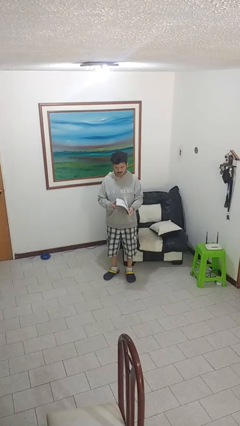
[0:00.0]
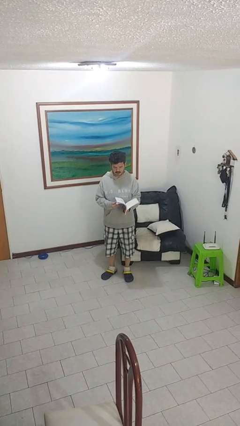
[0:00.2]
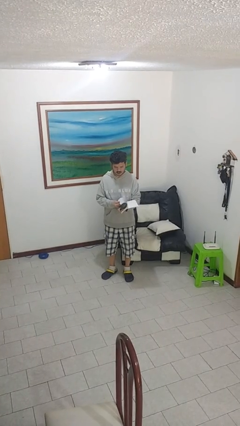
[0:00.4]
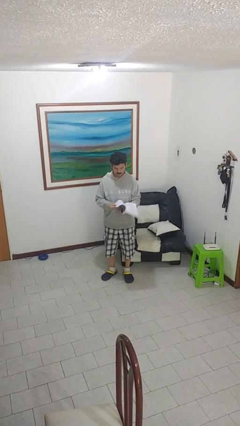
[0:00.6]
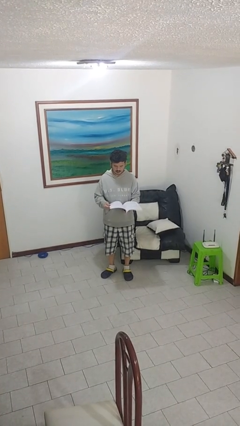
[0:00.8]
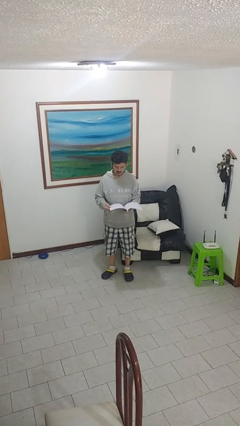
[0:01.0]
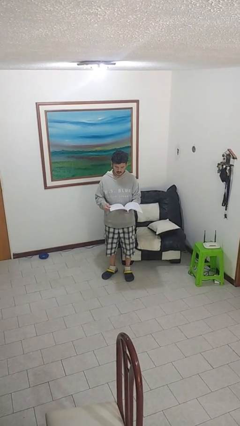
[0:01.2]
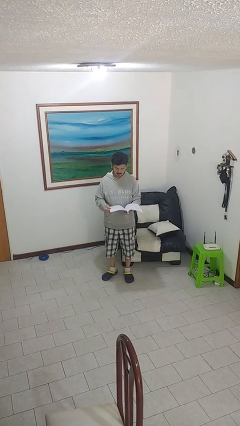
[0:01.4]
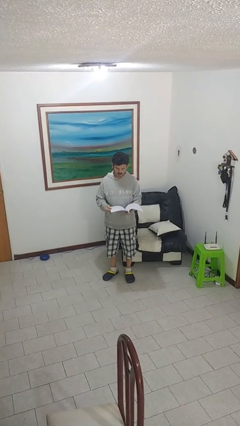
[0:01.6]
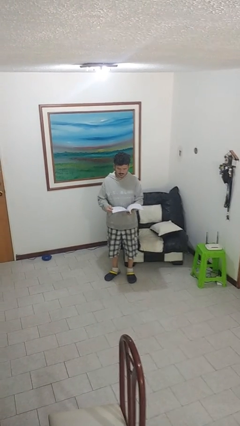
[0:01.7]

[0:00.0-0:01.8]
person reads magazine

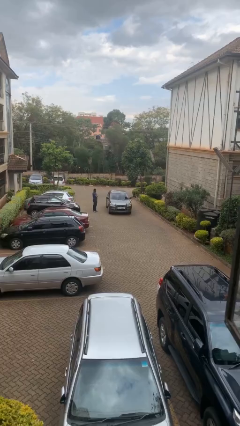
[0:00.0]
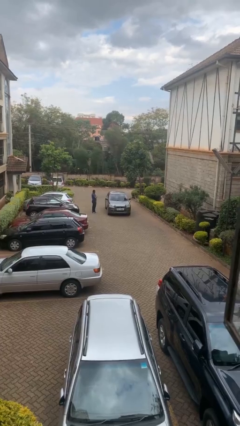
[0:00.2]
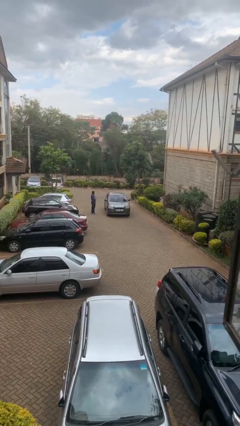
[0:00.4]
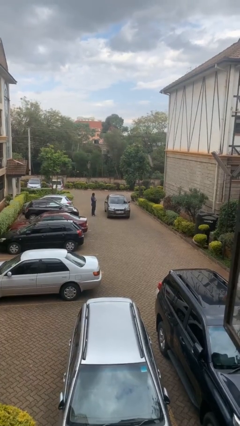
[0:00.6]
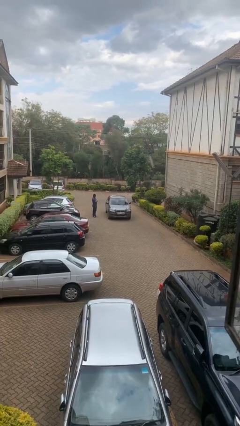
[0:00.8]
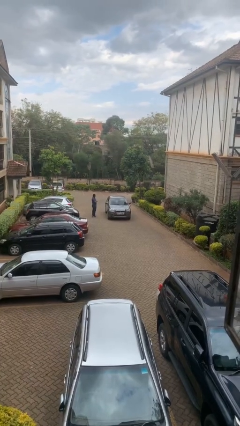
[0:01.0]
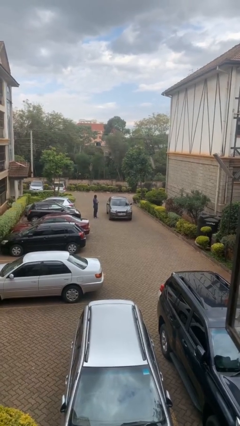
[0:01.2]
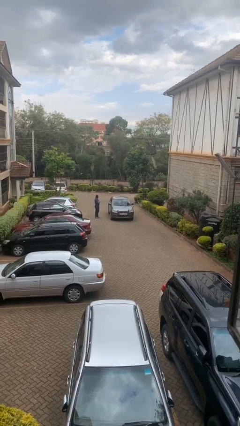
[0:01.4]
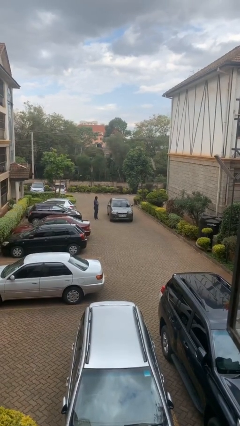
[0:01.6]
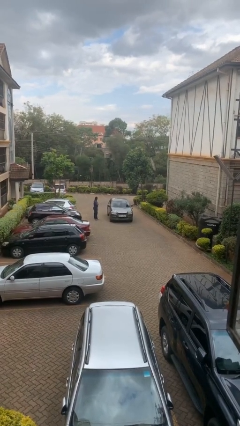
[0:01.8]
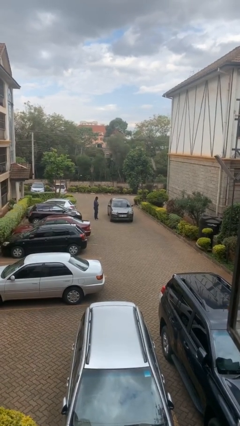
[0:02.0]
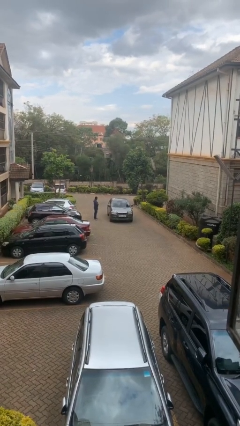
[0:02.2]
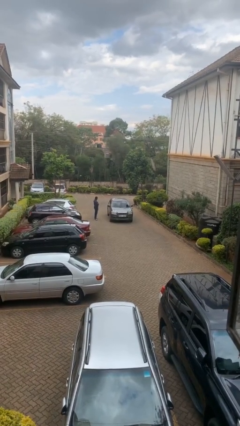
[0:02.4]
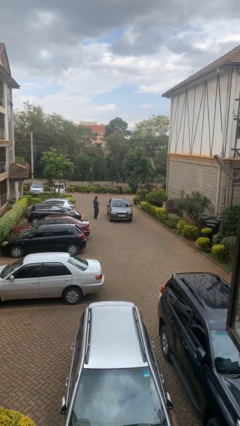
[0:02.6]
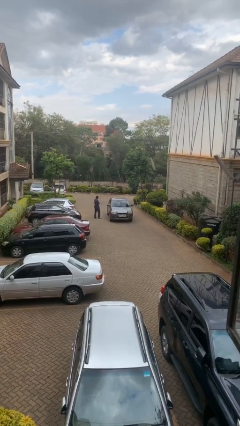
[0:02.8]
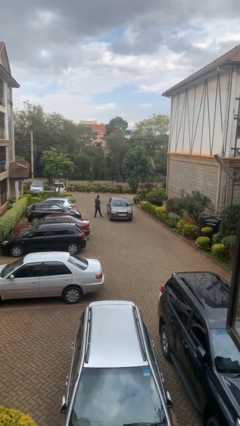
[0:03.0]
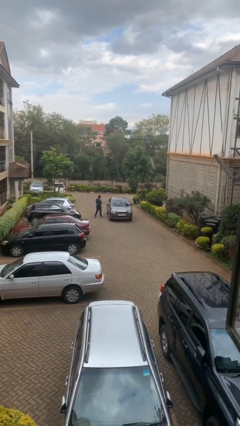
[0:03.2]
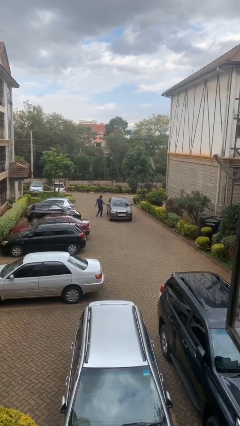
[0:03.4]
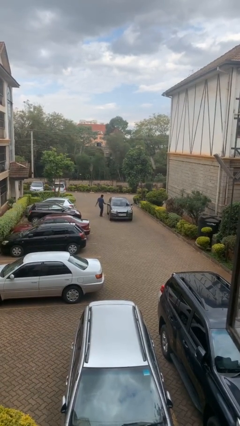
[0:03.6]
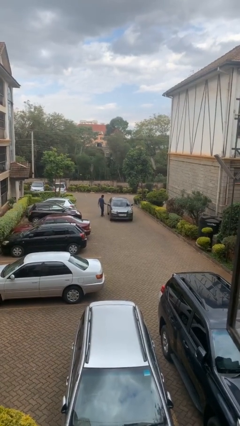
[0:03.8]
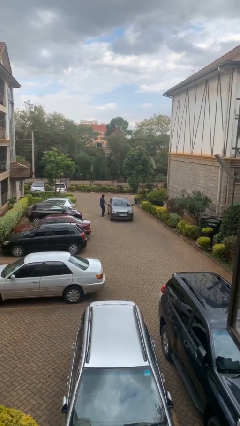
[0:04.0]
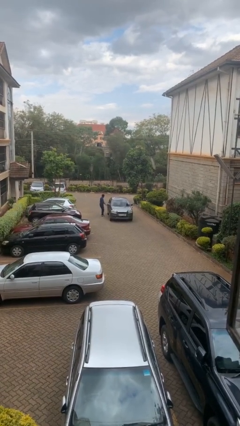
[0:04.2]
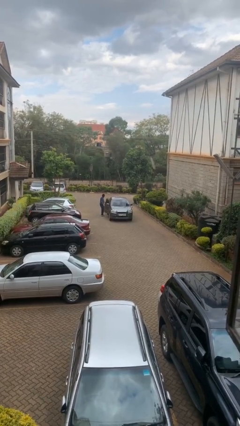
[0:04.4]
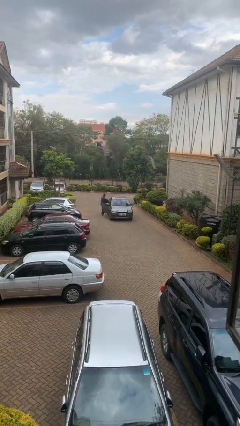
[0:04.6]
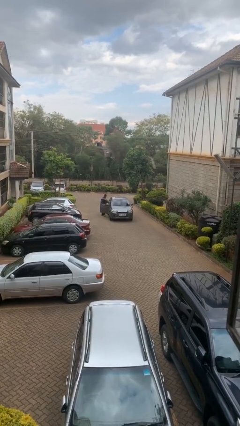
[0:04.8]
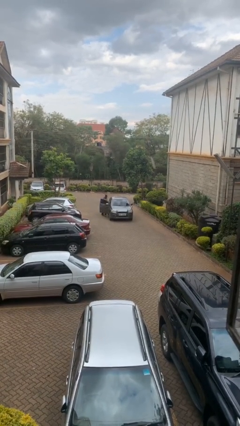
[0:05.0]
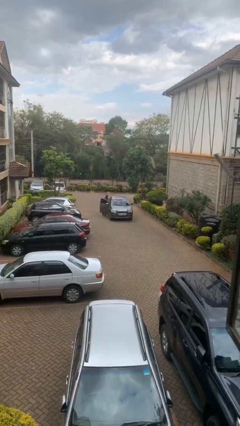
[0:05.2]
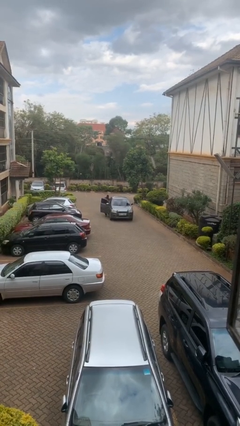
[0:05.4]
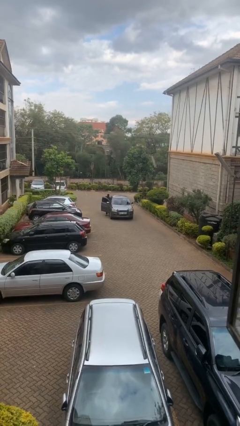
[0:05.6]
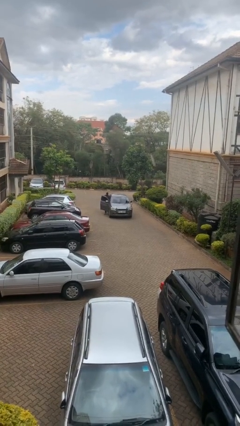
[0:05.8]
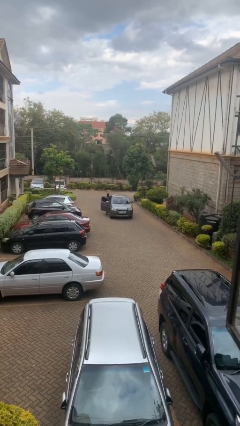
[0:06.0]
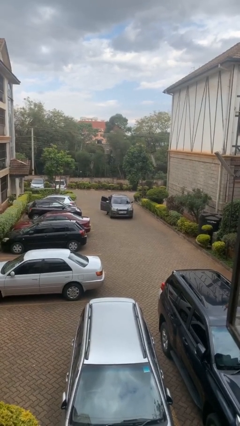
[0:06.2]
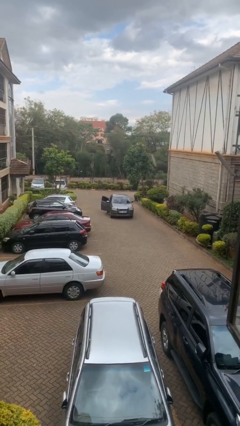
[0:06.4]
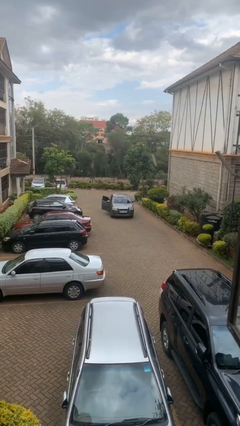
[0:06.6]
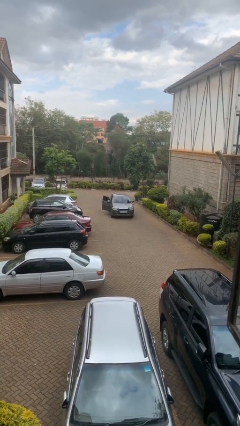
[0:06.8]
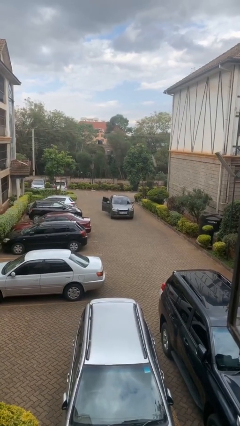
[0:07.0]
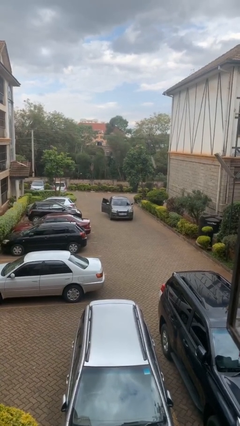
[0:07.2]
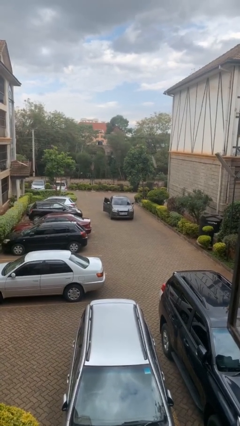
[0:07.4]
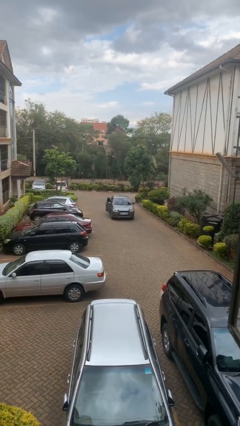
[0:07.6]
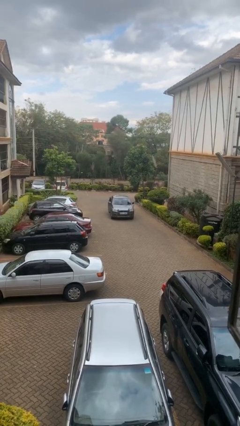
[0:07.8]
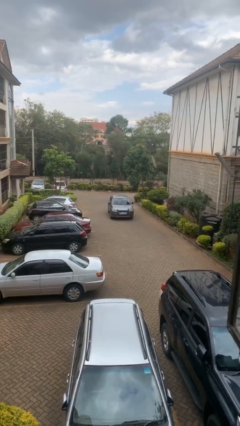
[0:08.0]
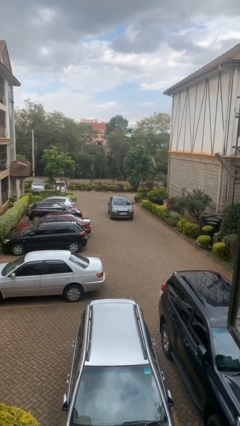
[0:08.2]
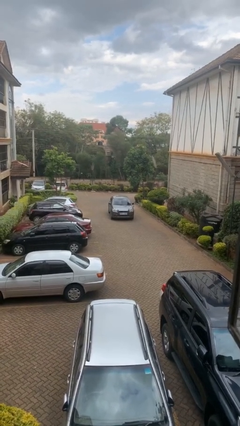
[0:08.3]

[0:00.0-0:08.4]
car picks up person

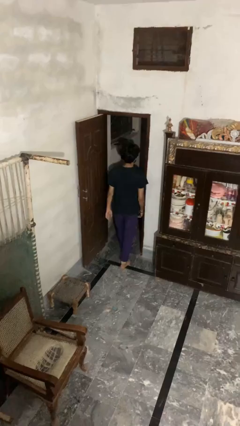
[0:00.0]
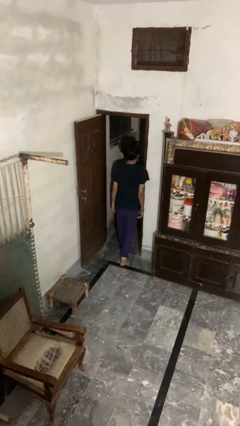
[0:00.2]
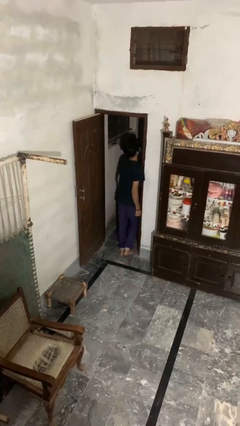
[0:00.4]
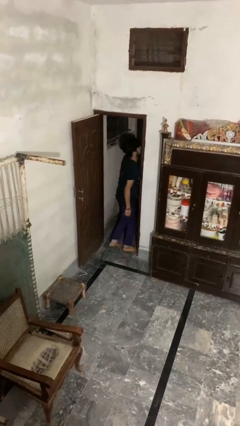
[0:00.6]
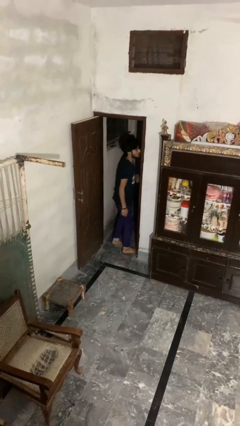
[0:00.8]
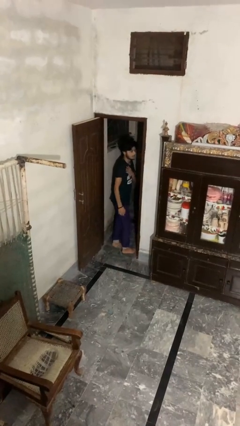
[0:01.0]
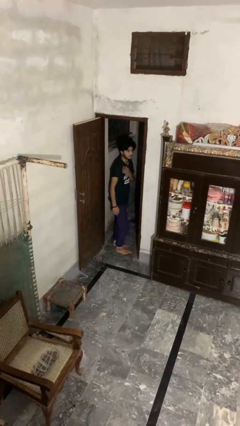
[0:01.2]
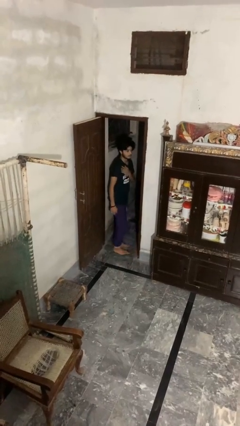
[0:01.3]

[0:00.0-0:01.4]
person bumps into wall

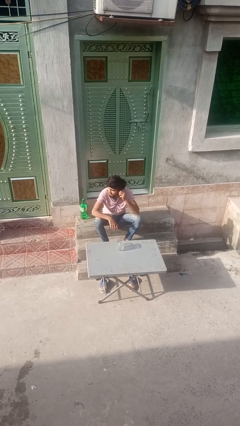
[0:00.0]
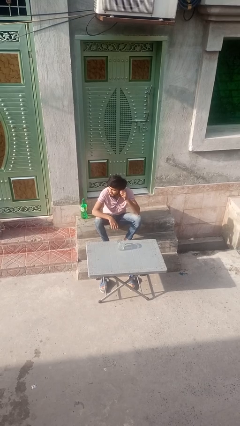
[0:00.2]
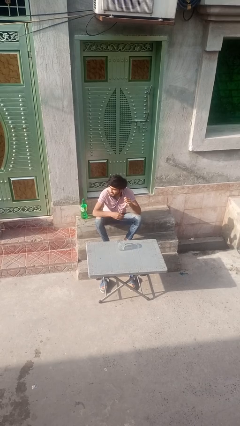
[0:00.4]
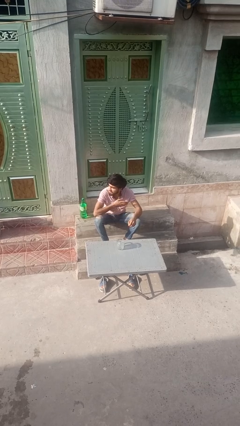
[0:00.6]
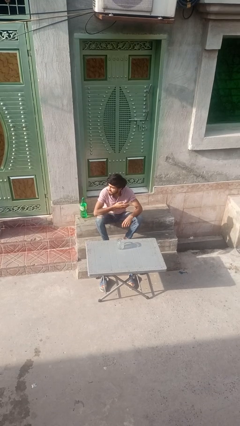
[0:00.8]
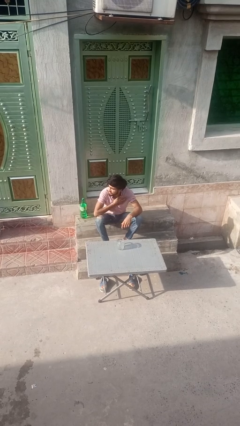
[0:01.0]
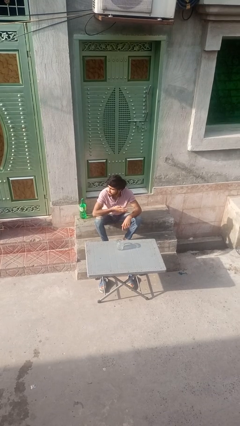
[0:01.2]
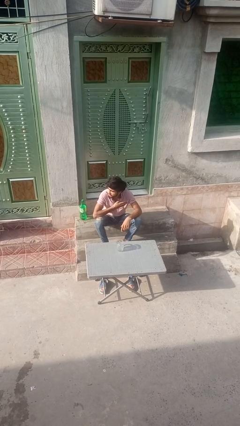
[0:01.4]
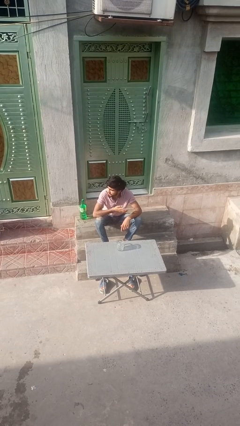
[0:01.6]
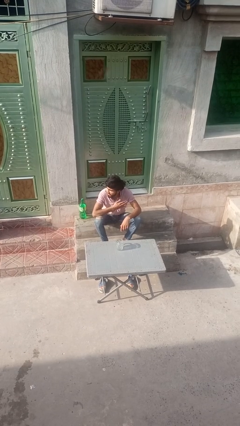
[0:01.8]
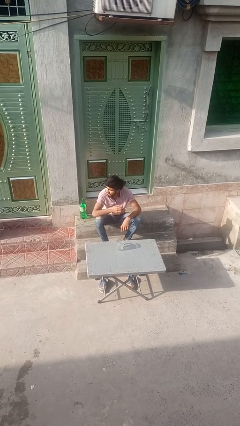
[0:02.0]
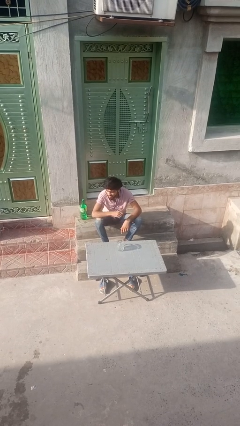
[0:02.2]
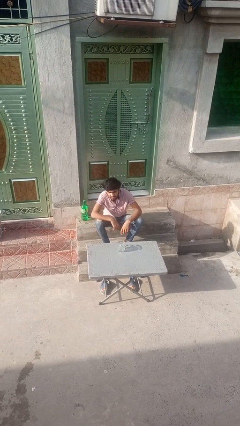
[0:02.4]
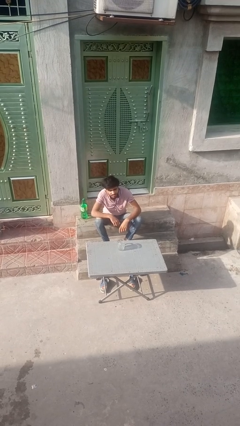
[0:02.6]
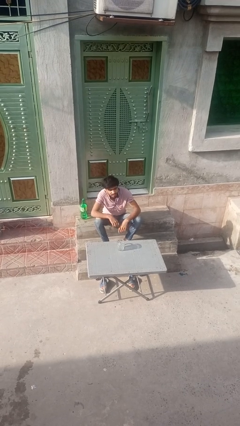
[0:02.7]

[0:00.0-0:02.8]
person drums on chest

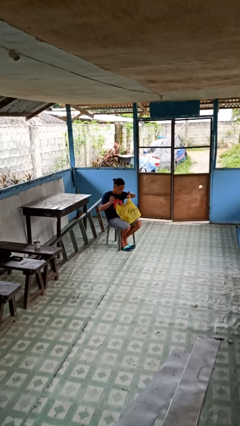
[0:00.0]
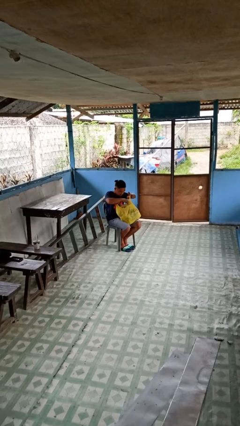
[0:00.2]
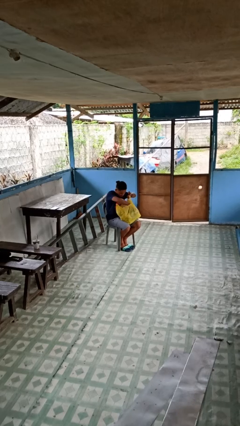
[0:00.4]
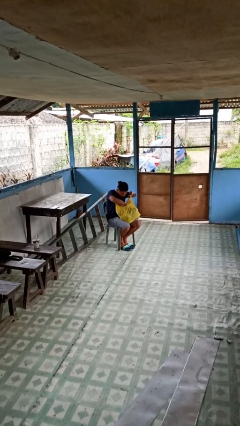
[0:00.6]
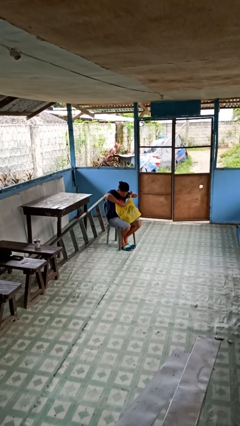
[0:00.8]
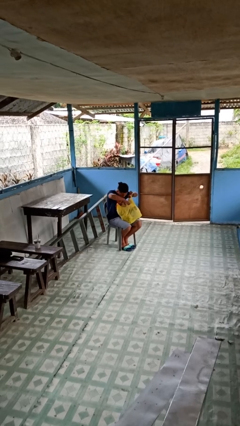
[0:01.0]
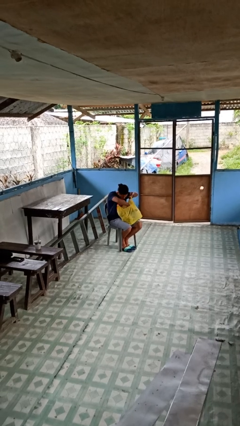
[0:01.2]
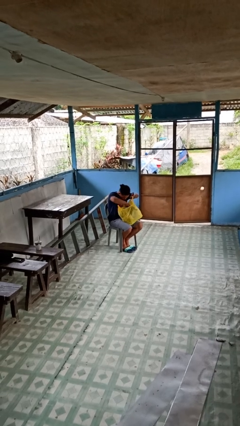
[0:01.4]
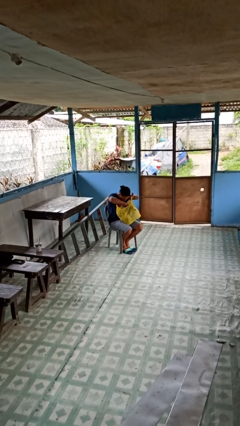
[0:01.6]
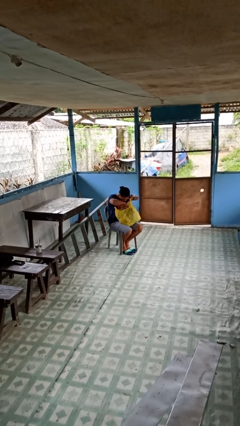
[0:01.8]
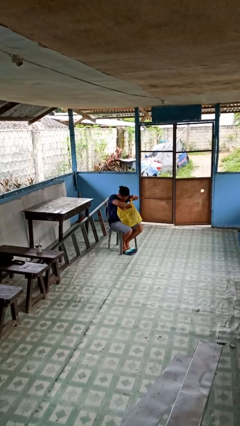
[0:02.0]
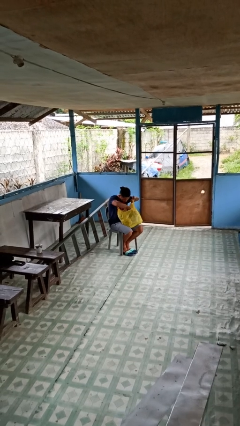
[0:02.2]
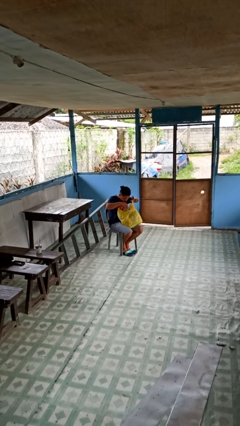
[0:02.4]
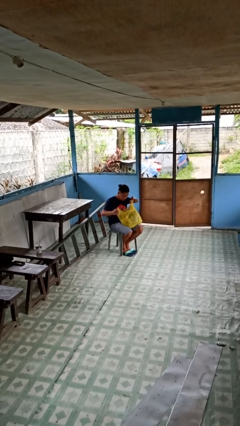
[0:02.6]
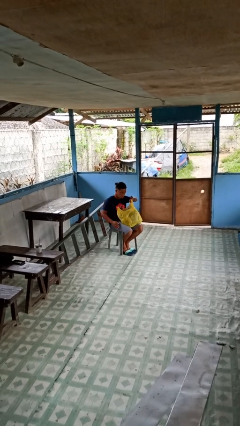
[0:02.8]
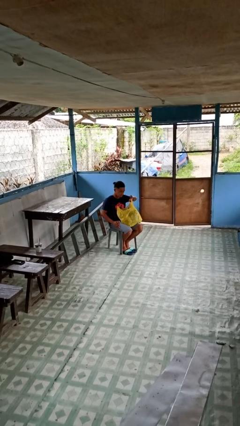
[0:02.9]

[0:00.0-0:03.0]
person searches in bag

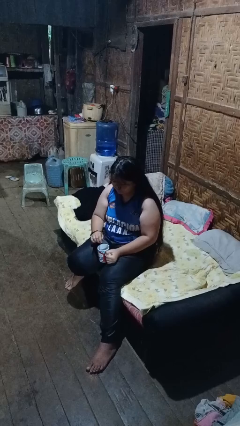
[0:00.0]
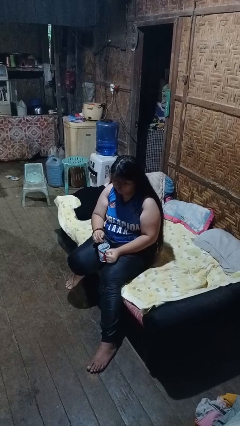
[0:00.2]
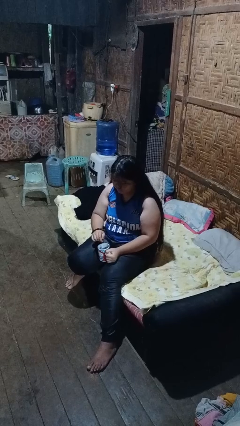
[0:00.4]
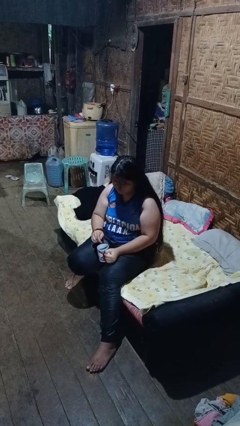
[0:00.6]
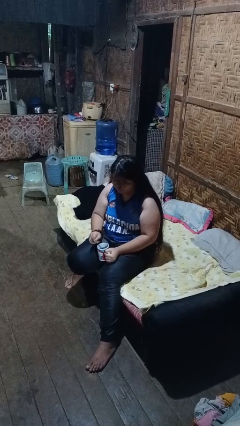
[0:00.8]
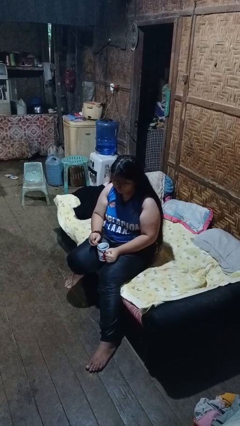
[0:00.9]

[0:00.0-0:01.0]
person stirs mug
